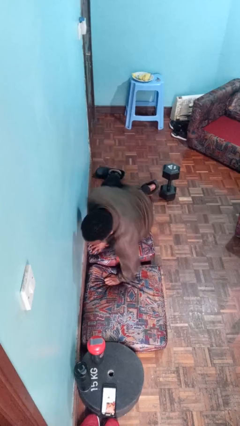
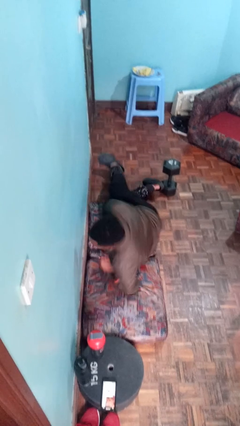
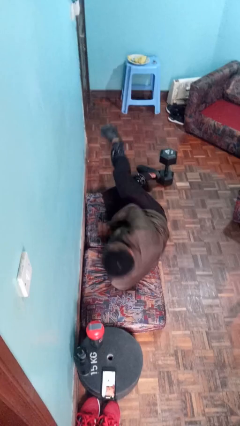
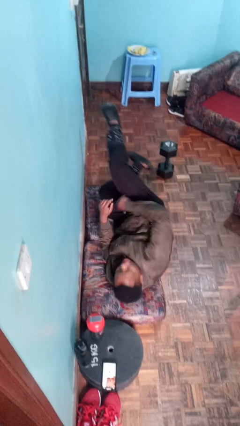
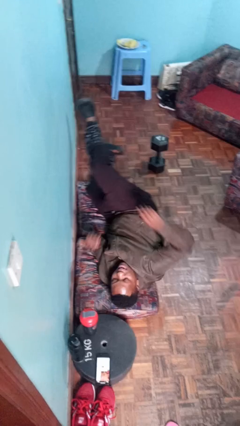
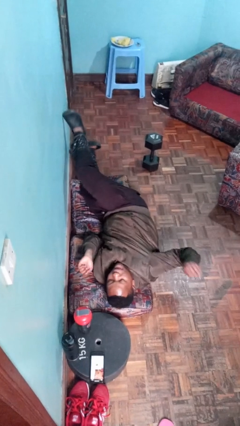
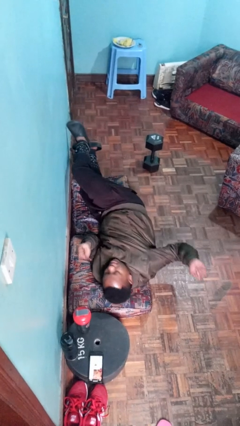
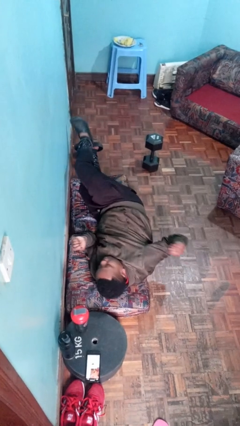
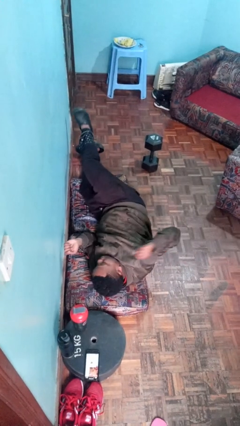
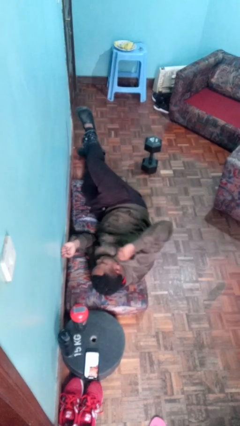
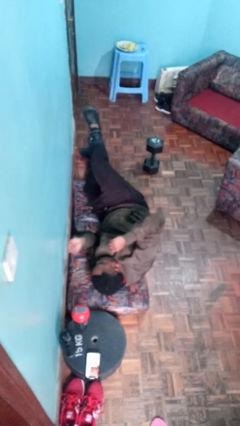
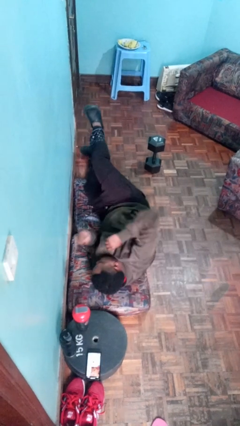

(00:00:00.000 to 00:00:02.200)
person lies down on floor

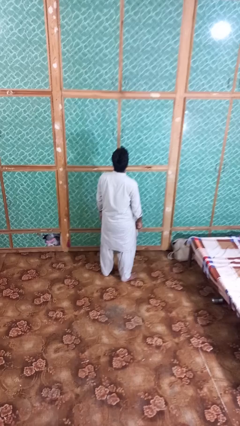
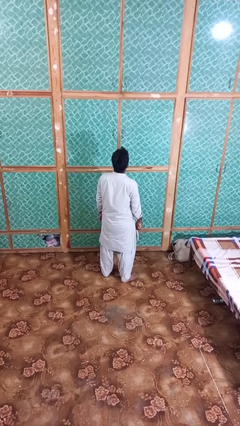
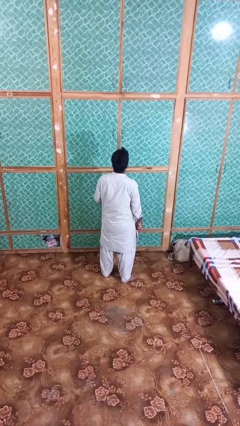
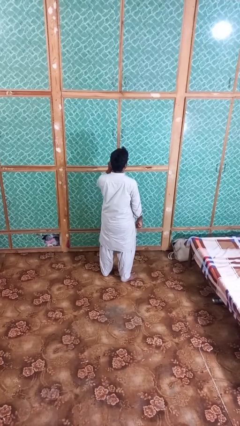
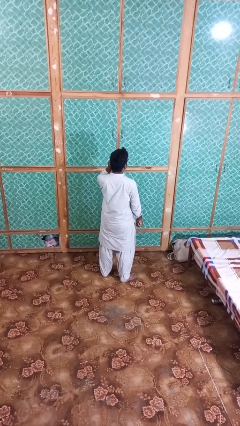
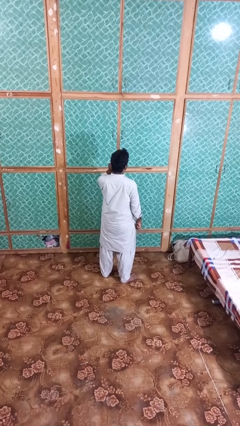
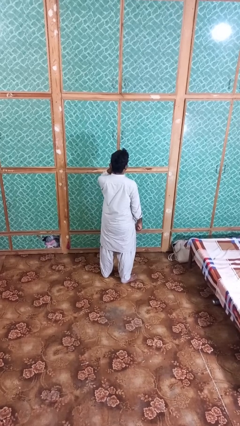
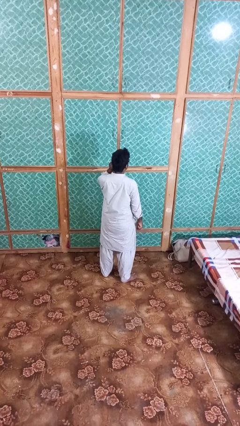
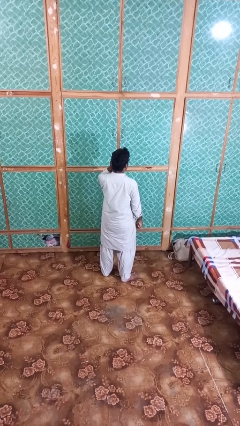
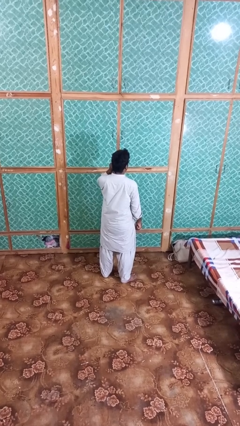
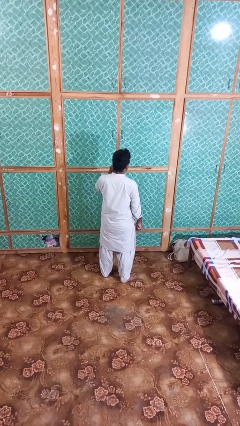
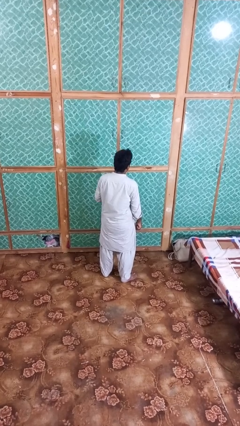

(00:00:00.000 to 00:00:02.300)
person touches earlobe

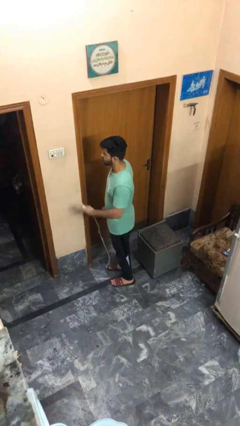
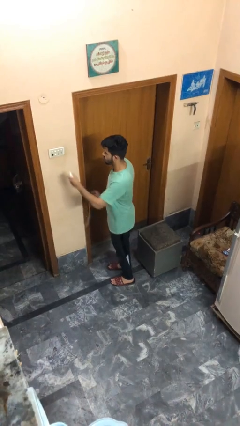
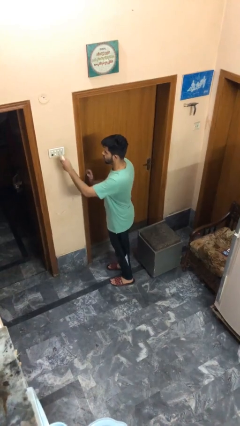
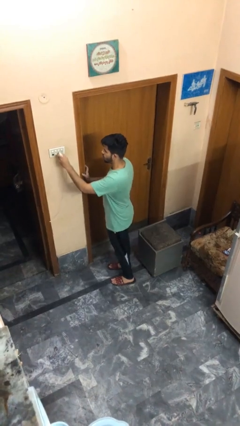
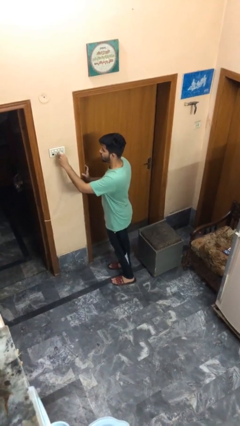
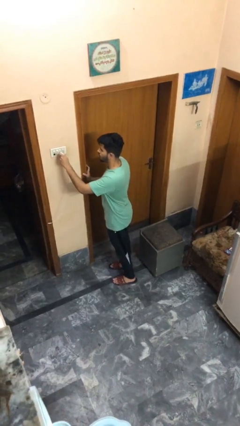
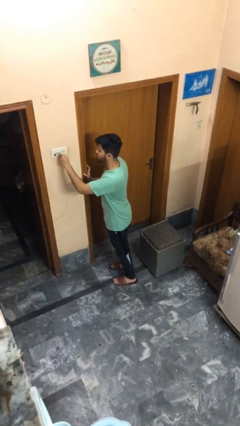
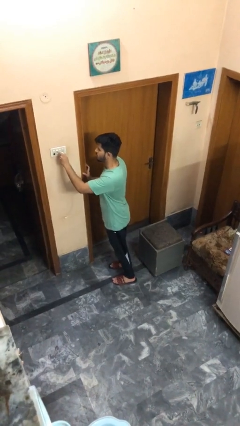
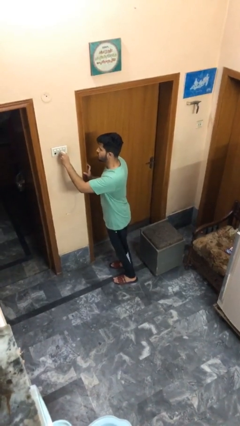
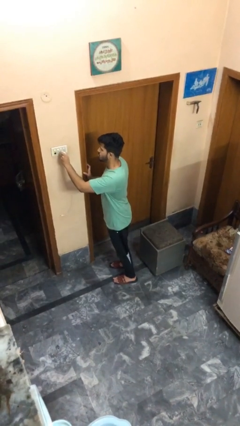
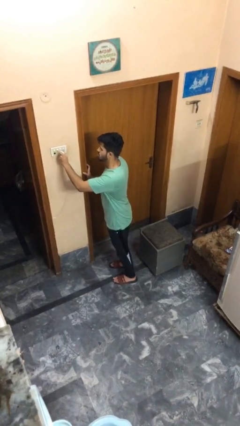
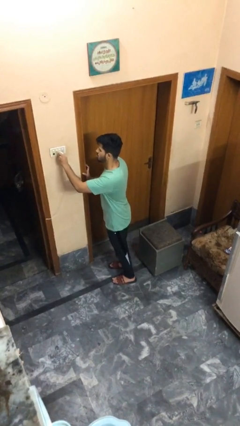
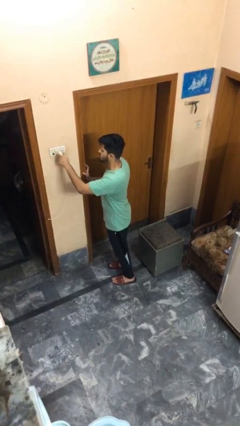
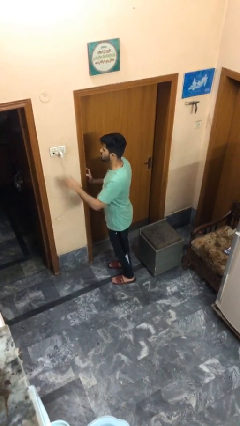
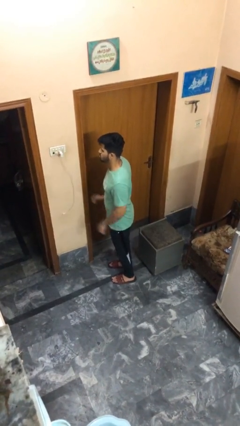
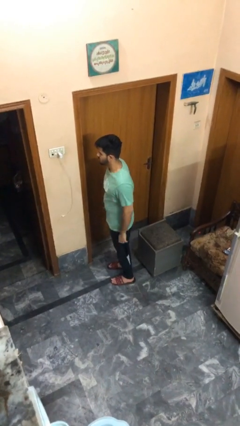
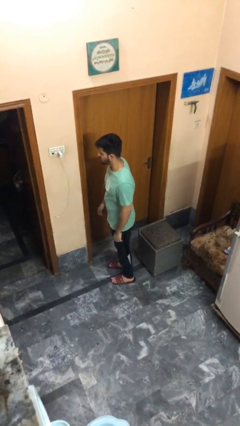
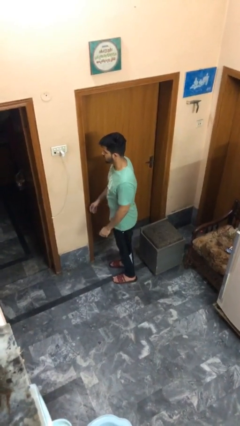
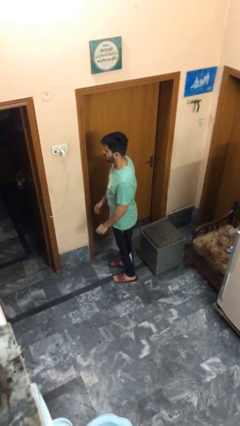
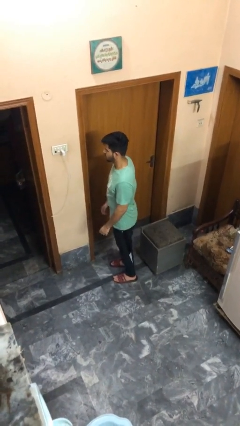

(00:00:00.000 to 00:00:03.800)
person plugs into electrical socket

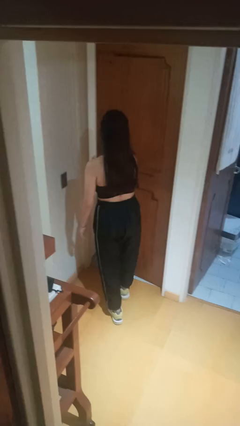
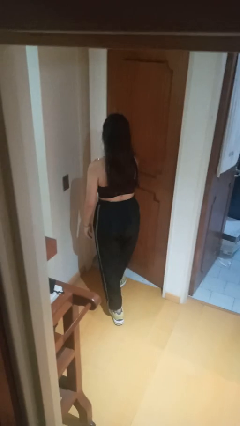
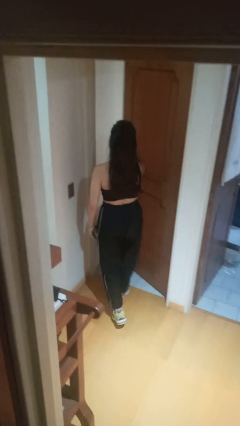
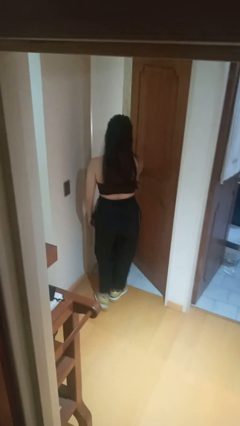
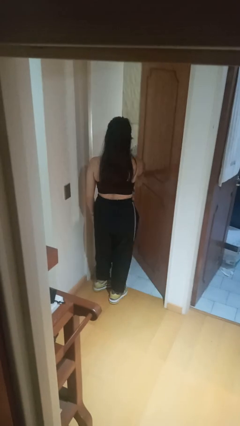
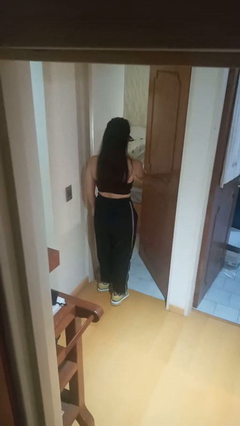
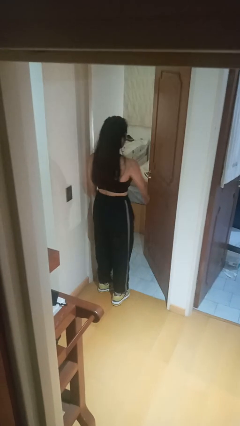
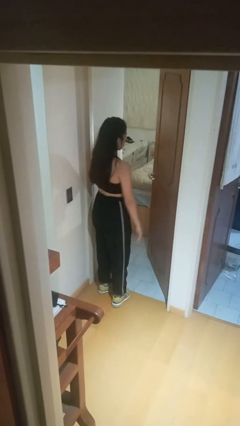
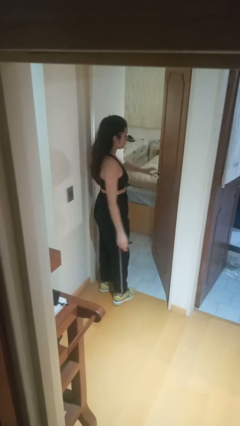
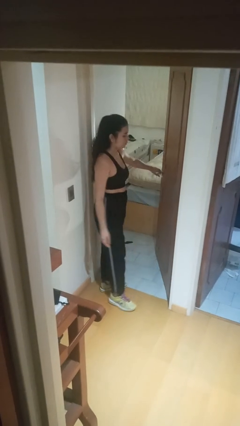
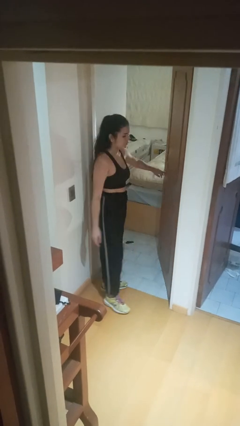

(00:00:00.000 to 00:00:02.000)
person opens facility door

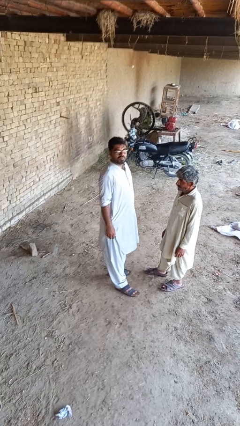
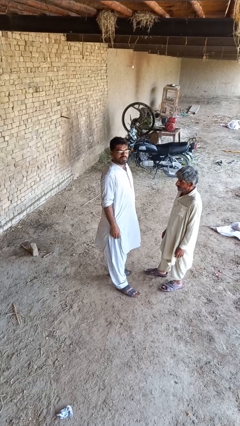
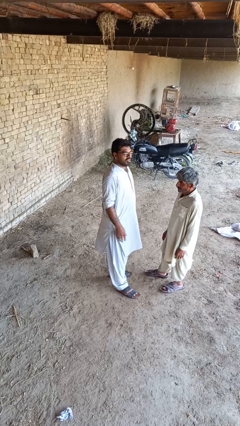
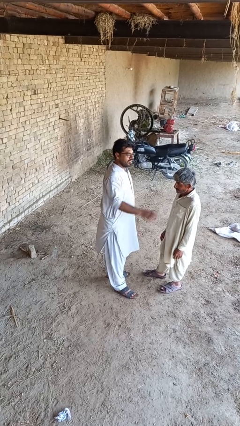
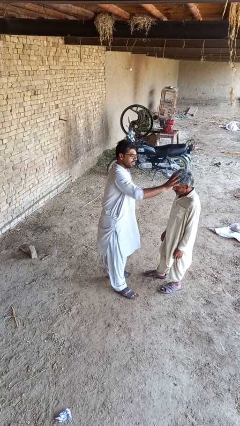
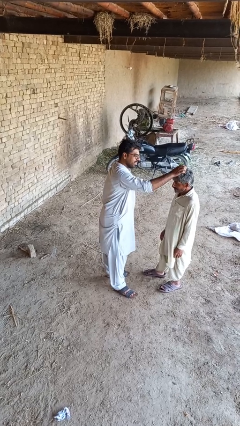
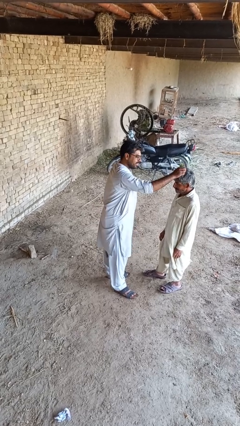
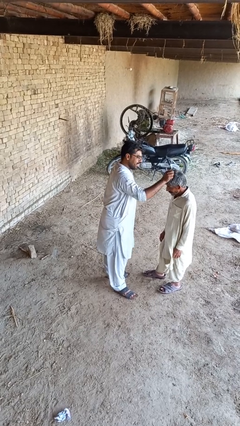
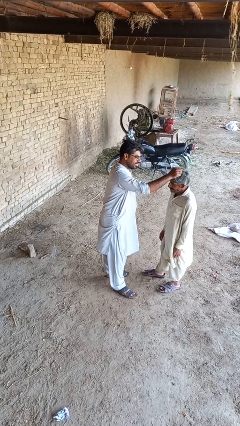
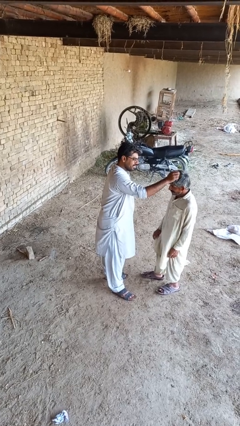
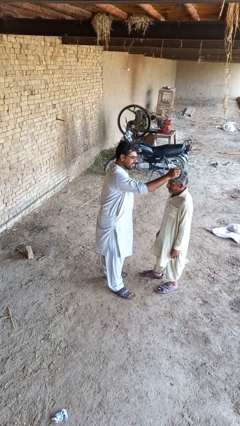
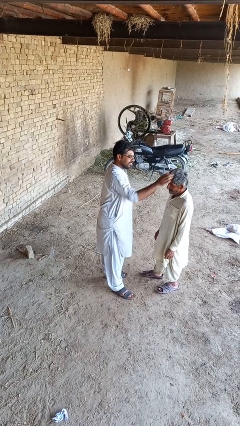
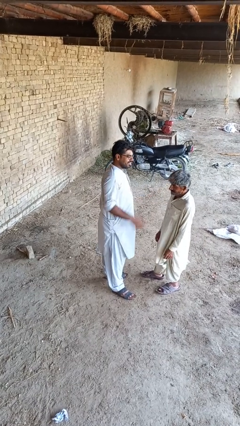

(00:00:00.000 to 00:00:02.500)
person grabs person by hair

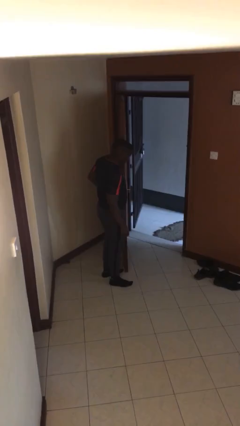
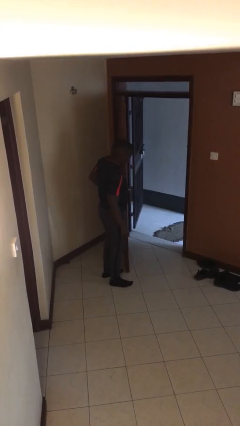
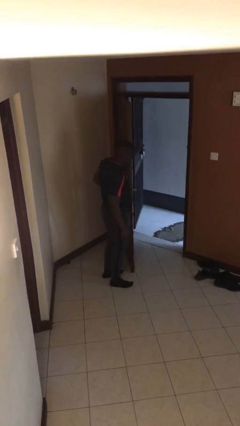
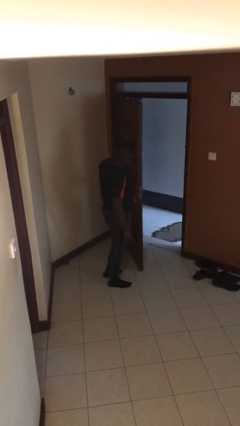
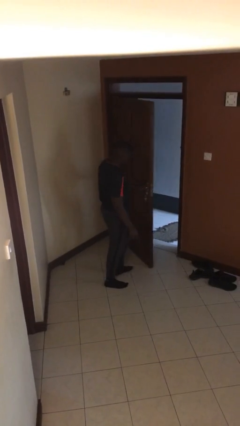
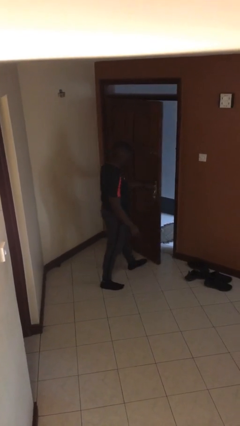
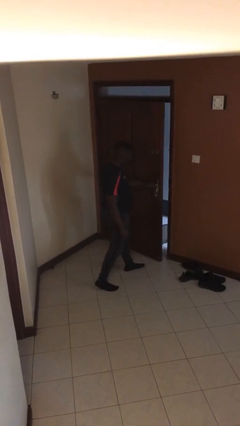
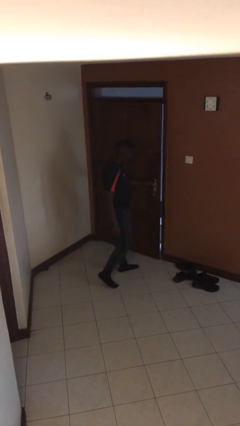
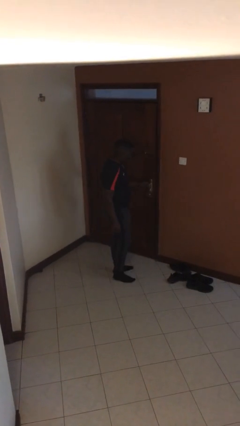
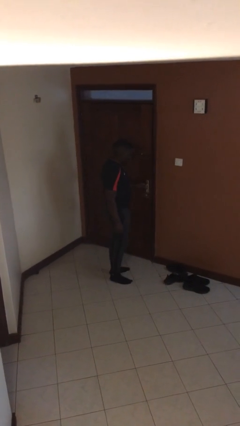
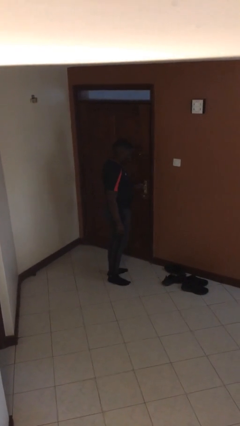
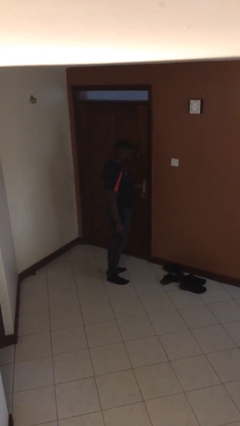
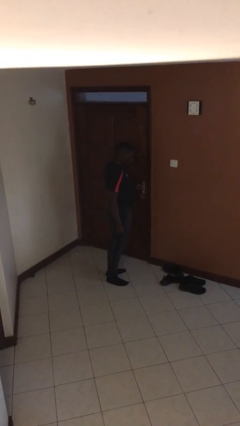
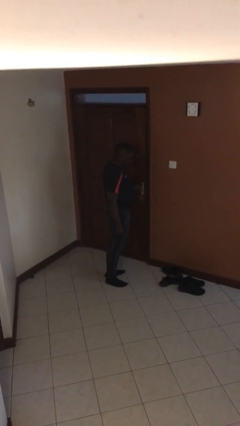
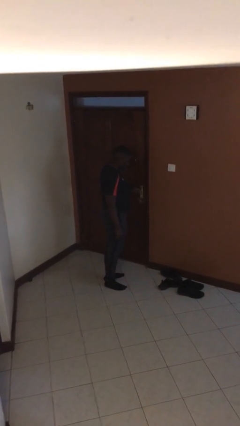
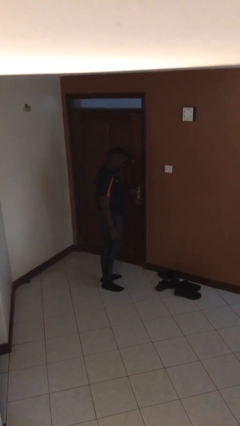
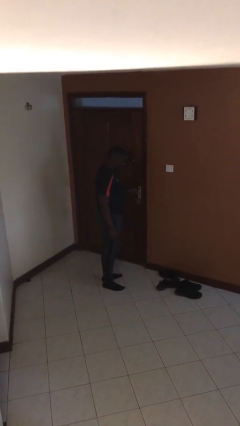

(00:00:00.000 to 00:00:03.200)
person closes facility door

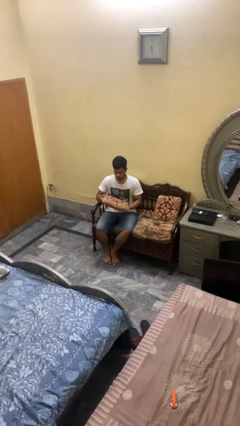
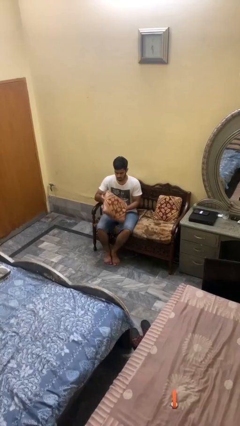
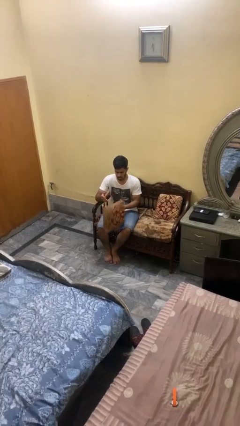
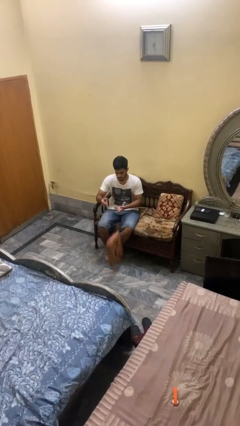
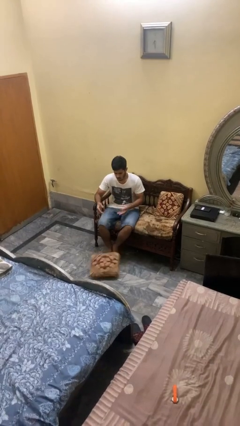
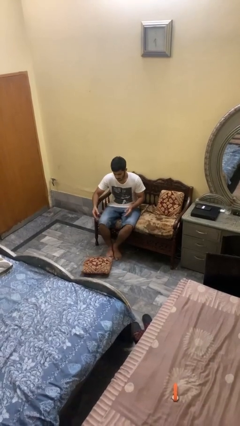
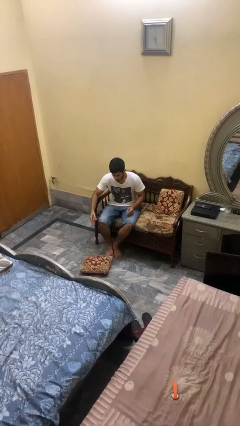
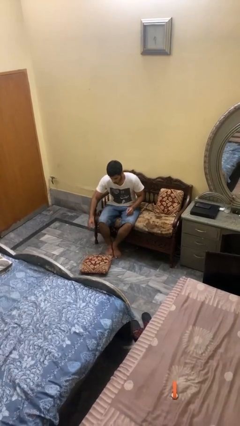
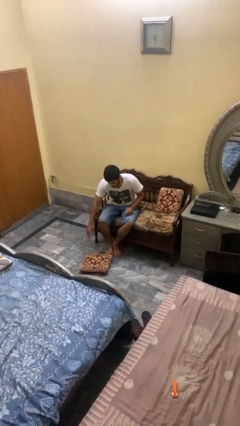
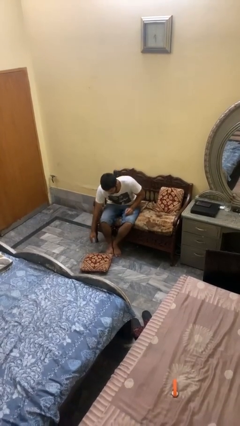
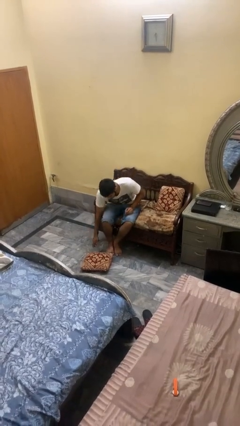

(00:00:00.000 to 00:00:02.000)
person drops object
